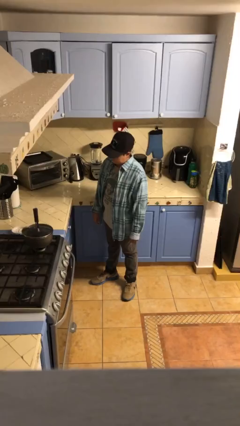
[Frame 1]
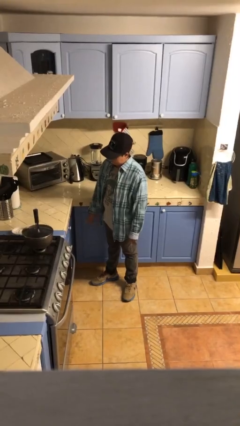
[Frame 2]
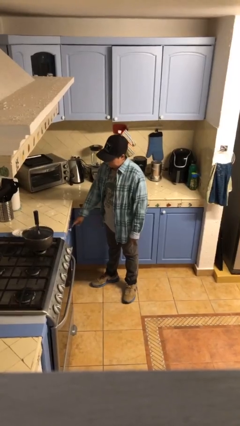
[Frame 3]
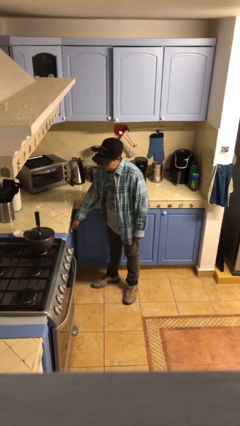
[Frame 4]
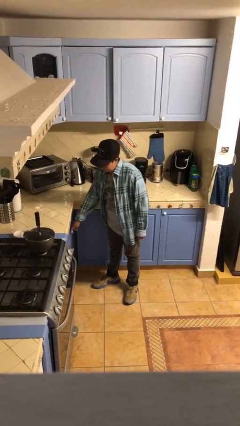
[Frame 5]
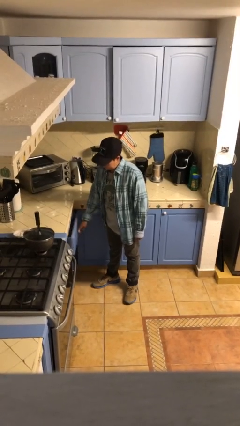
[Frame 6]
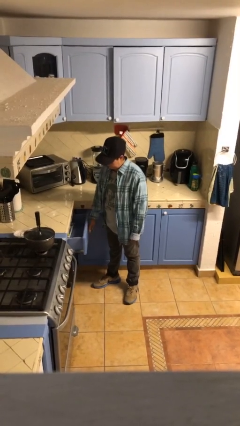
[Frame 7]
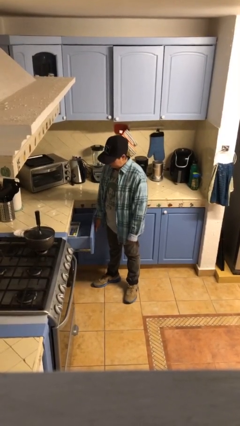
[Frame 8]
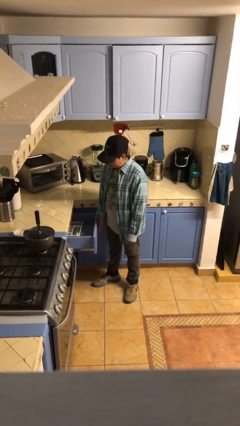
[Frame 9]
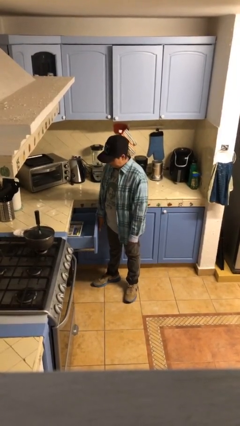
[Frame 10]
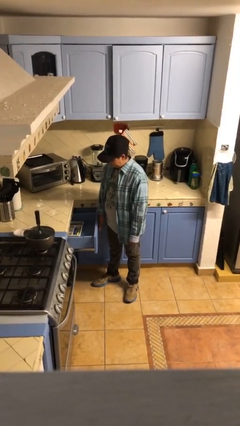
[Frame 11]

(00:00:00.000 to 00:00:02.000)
person opens kitchen drawer

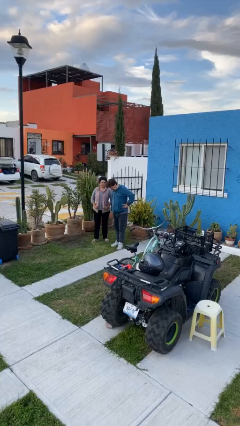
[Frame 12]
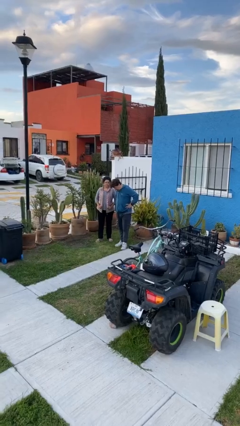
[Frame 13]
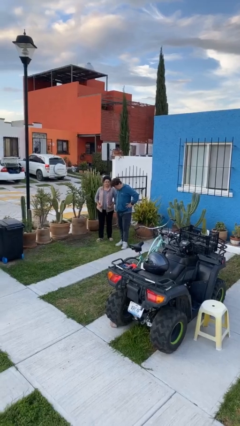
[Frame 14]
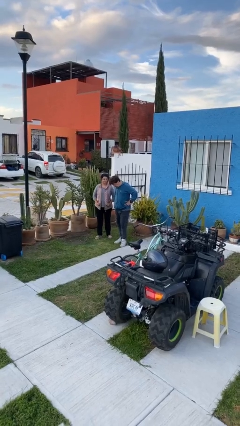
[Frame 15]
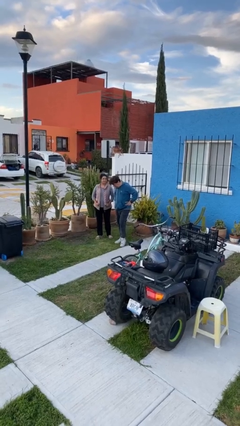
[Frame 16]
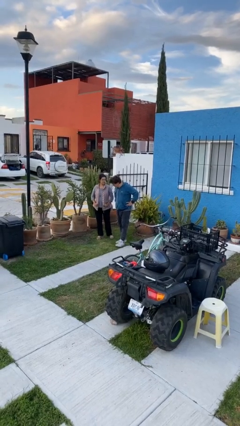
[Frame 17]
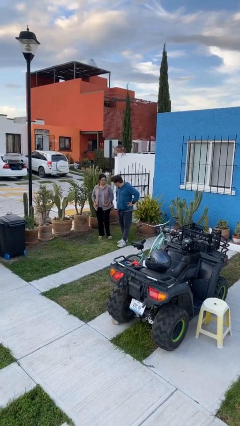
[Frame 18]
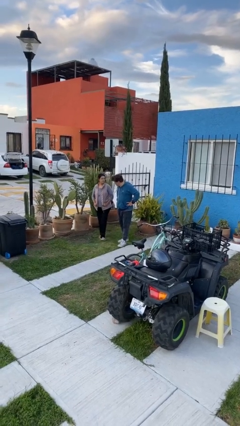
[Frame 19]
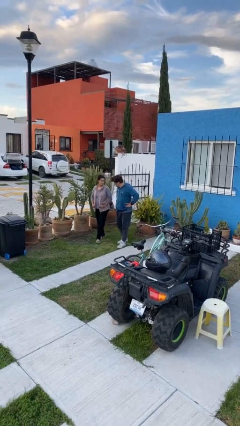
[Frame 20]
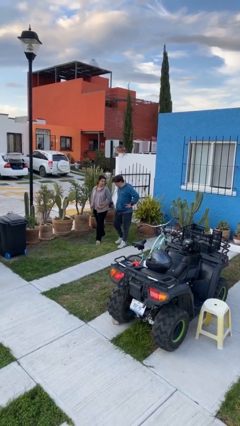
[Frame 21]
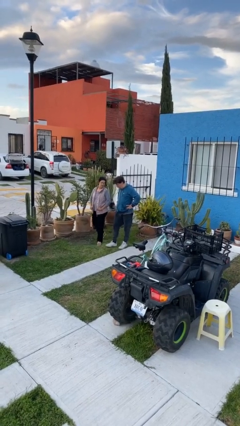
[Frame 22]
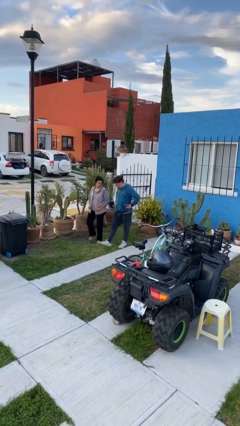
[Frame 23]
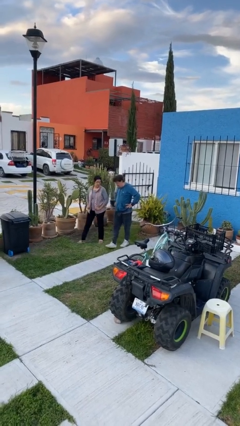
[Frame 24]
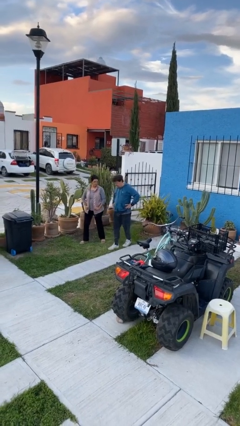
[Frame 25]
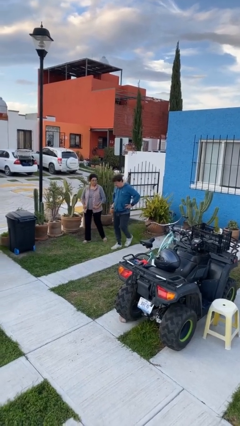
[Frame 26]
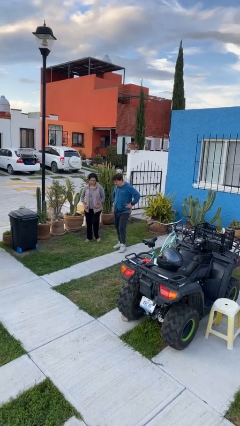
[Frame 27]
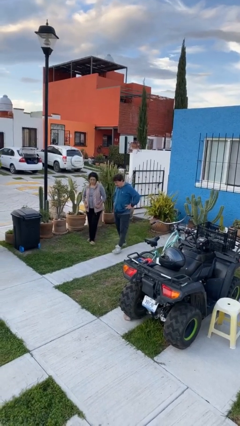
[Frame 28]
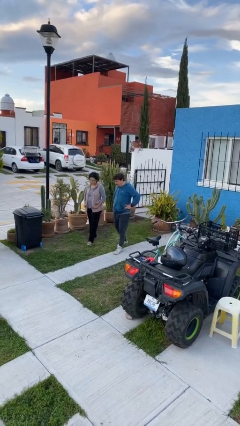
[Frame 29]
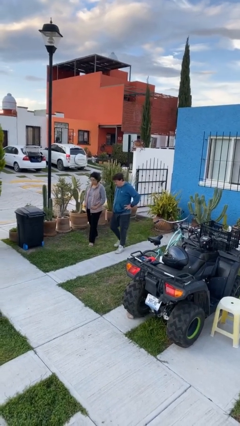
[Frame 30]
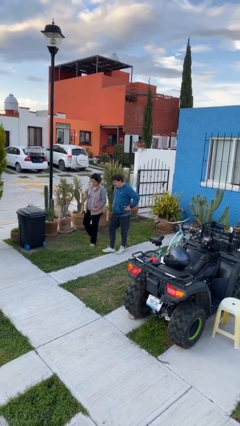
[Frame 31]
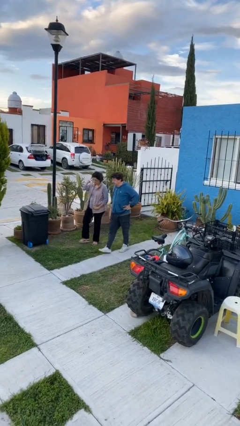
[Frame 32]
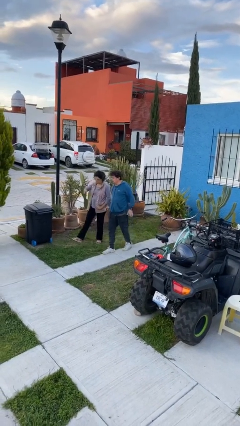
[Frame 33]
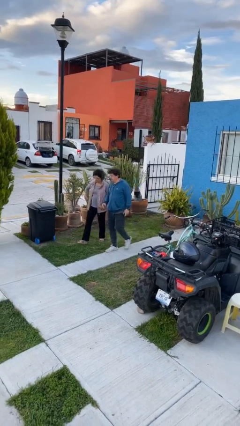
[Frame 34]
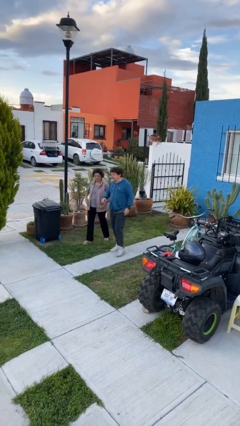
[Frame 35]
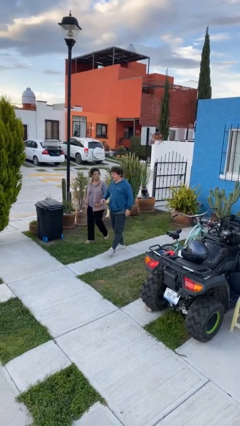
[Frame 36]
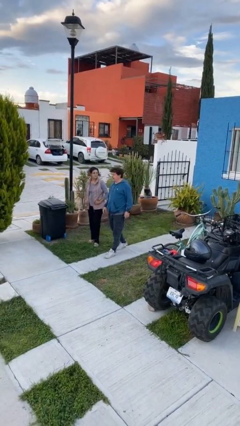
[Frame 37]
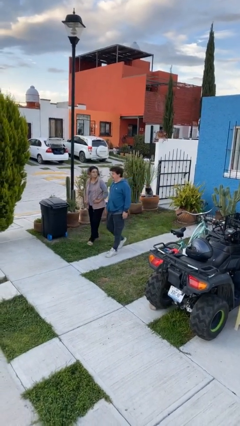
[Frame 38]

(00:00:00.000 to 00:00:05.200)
person talks to person

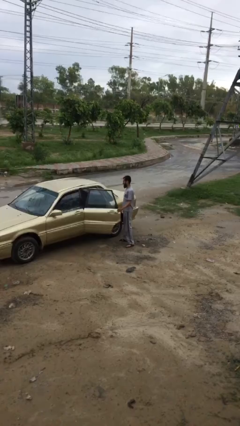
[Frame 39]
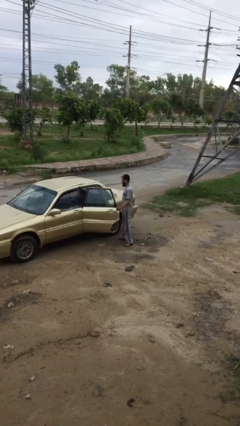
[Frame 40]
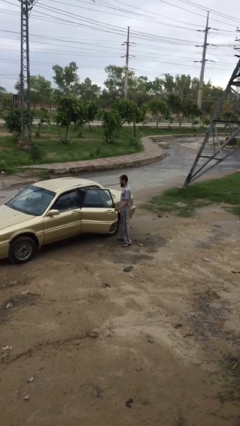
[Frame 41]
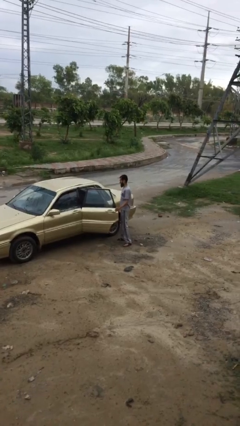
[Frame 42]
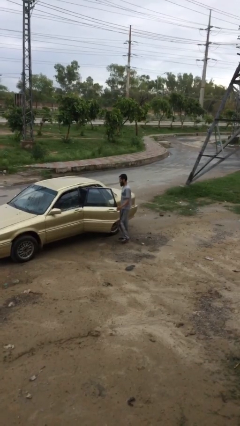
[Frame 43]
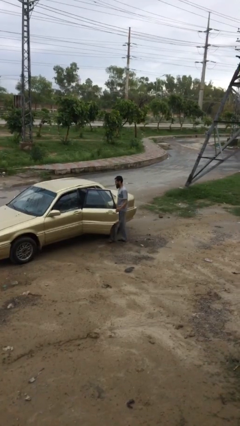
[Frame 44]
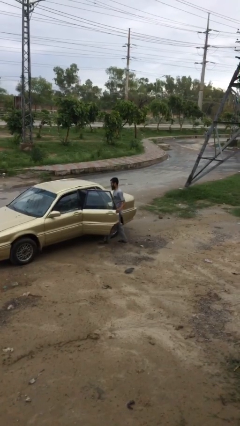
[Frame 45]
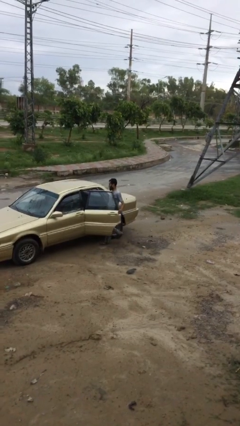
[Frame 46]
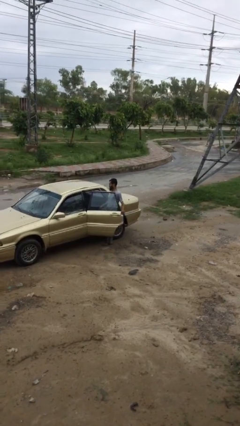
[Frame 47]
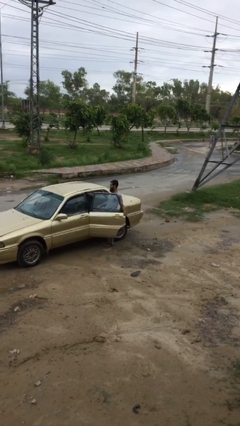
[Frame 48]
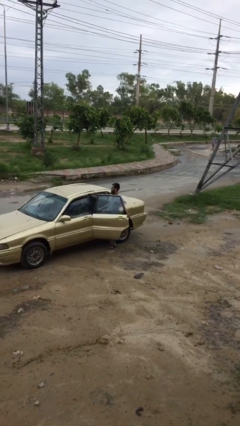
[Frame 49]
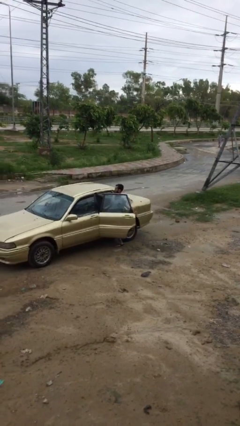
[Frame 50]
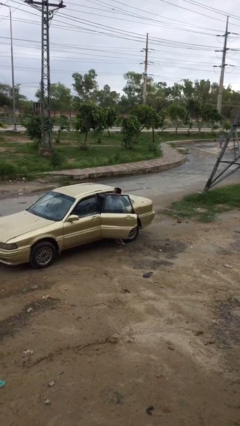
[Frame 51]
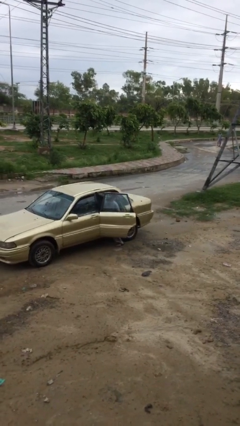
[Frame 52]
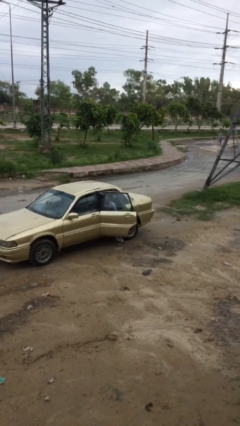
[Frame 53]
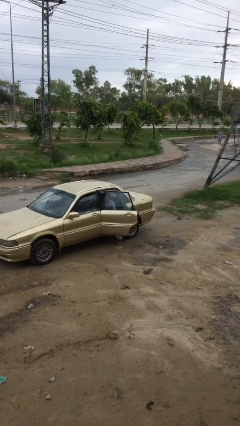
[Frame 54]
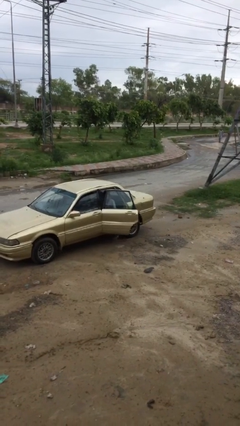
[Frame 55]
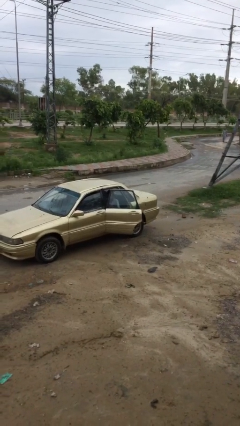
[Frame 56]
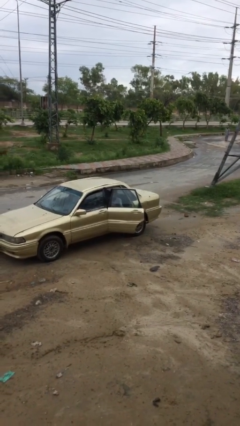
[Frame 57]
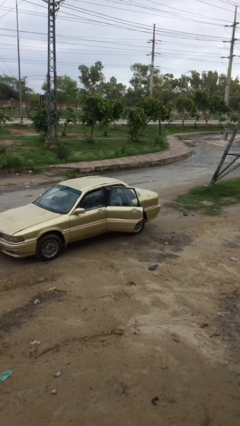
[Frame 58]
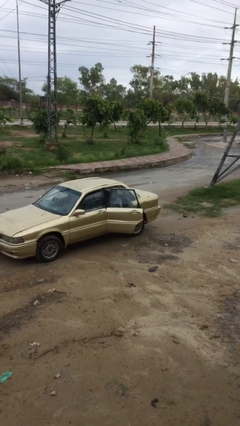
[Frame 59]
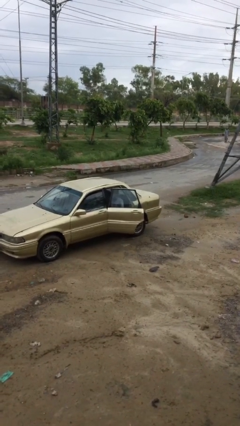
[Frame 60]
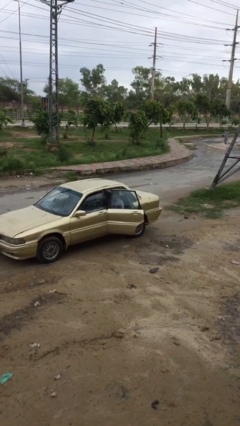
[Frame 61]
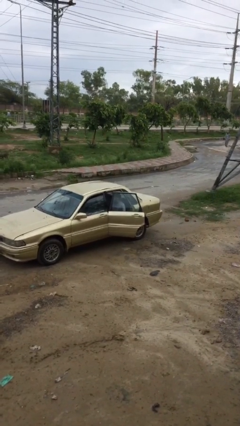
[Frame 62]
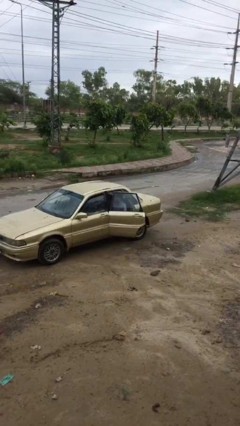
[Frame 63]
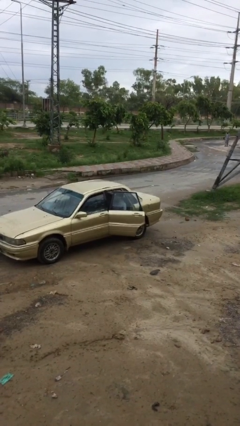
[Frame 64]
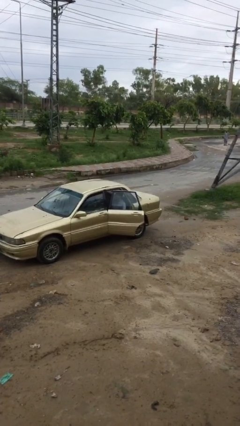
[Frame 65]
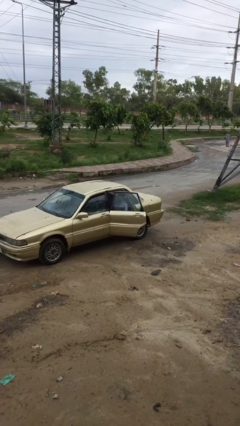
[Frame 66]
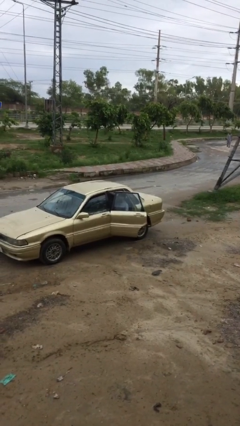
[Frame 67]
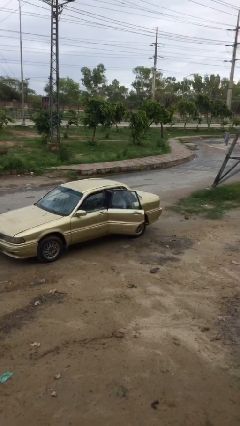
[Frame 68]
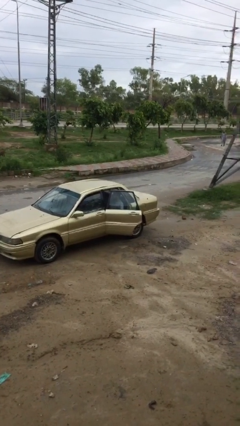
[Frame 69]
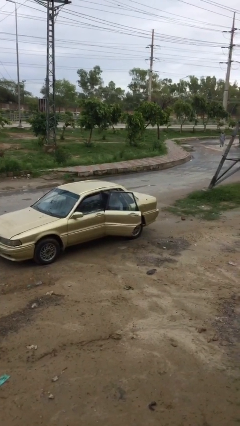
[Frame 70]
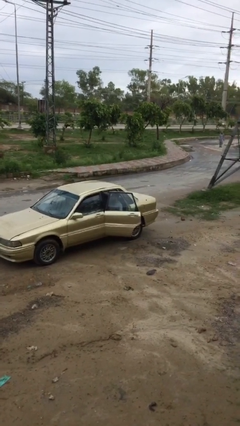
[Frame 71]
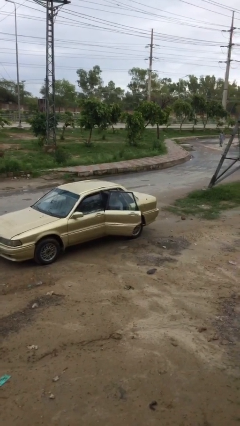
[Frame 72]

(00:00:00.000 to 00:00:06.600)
person enters car

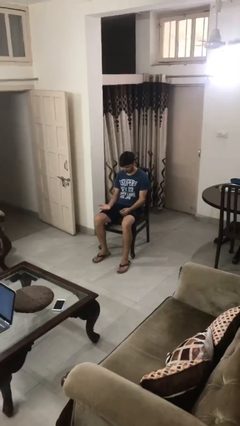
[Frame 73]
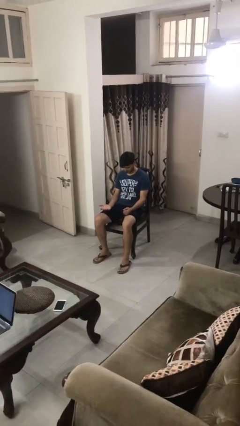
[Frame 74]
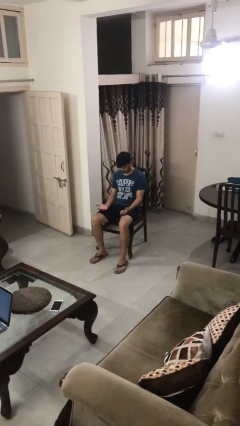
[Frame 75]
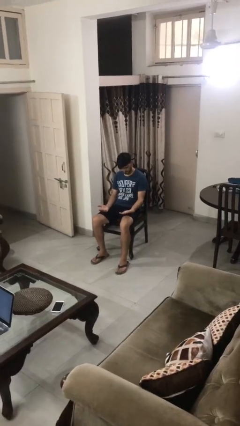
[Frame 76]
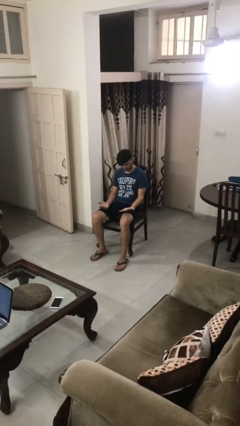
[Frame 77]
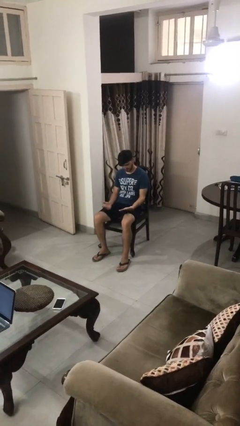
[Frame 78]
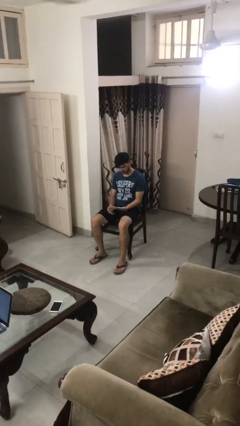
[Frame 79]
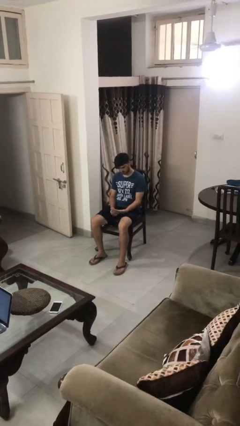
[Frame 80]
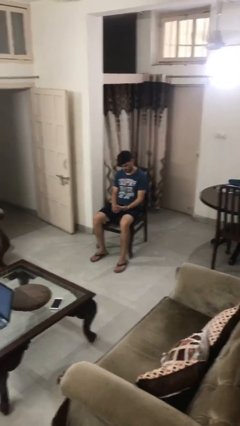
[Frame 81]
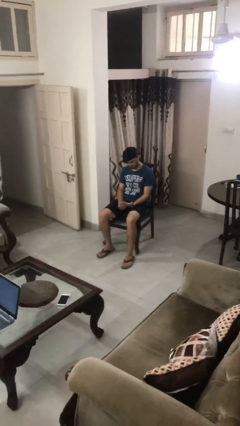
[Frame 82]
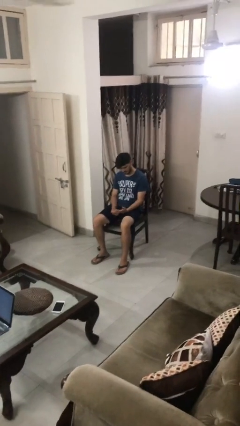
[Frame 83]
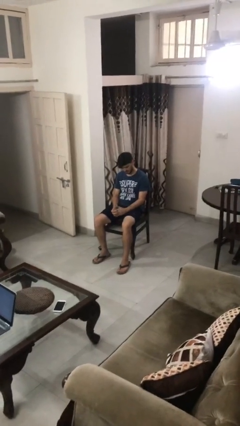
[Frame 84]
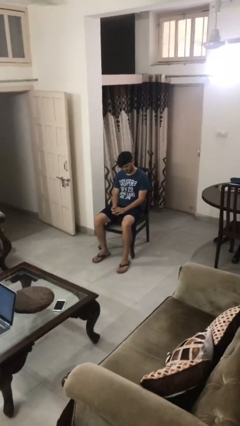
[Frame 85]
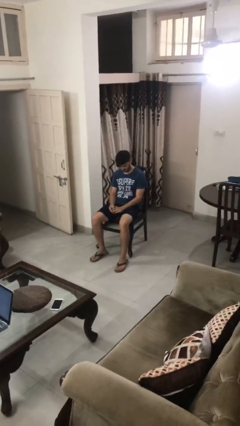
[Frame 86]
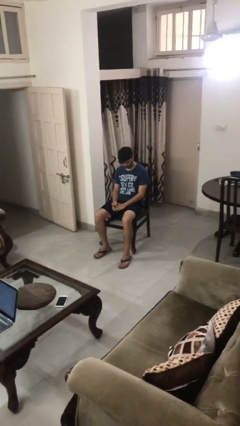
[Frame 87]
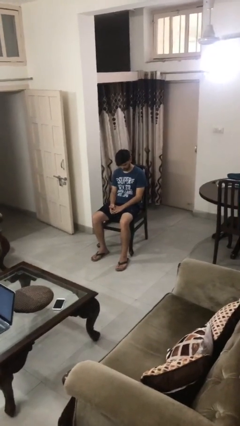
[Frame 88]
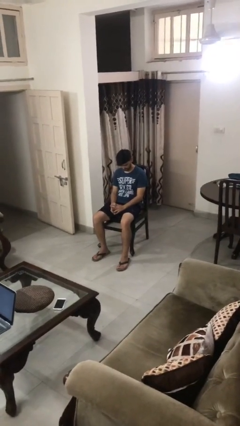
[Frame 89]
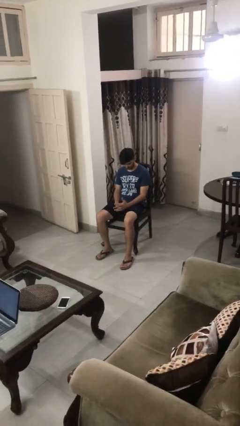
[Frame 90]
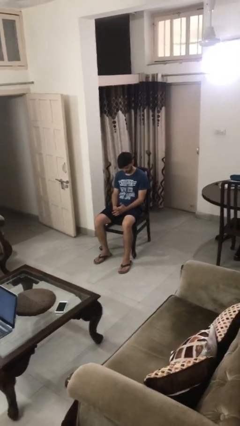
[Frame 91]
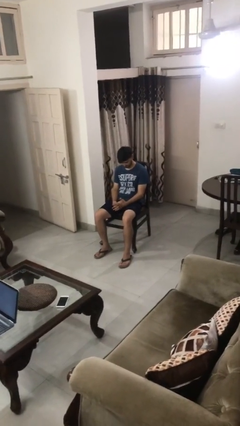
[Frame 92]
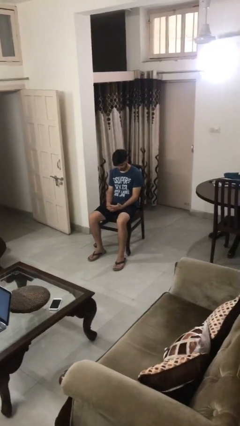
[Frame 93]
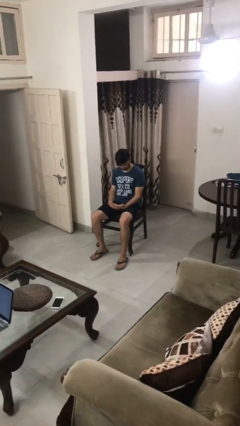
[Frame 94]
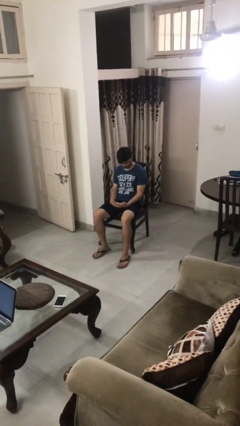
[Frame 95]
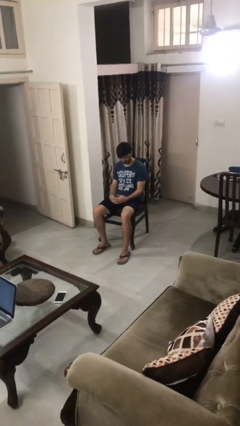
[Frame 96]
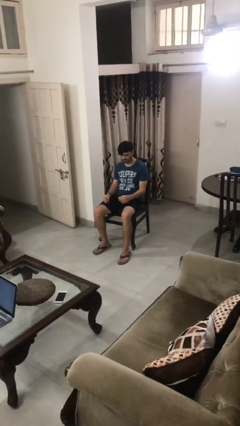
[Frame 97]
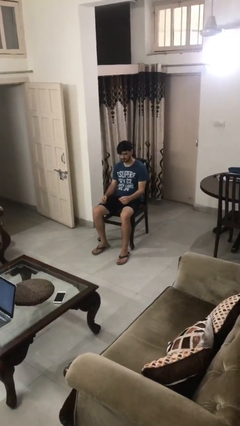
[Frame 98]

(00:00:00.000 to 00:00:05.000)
person looks at hands in lap
